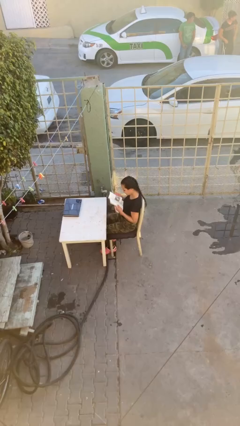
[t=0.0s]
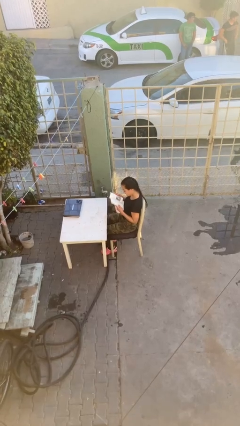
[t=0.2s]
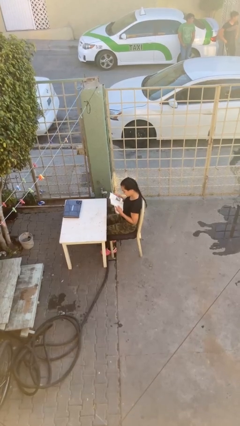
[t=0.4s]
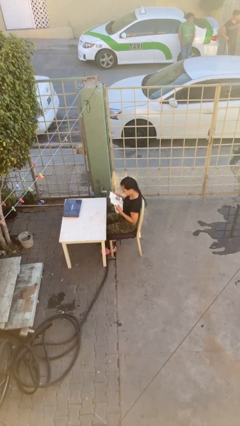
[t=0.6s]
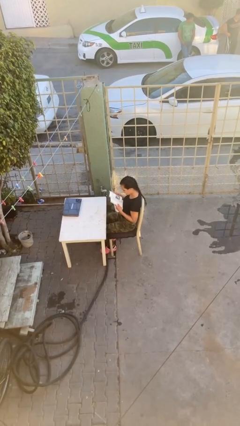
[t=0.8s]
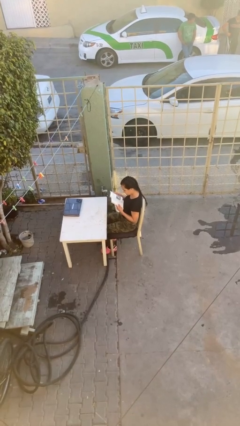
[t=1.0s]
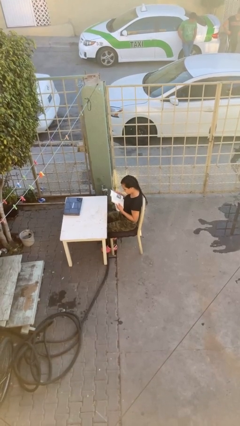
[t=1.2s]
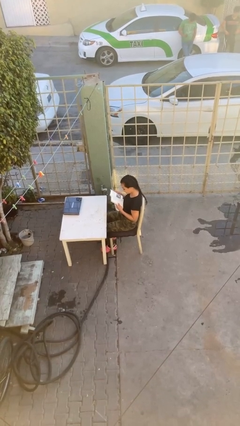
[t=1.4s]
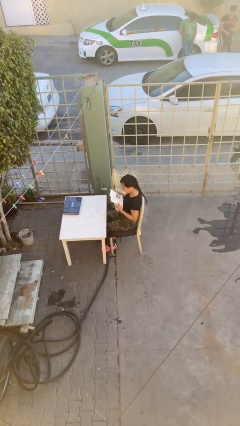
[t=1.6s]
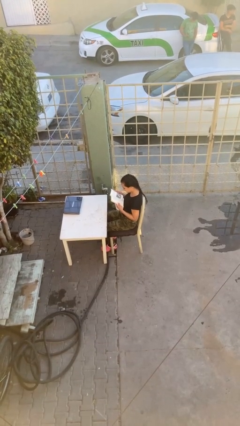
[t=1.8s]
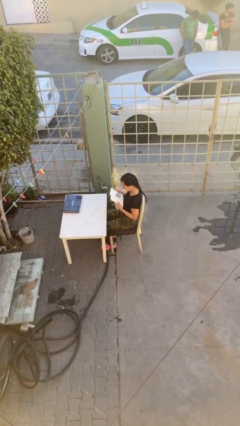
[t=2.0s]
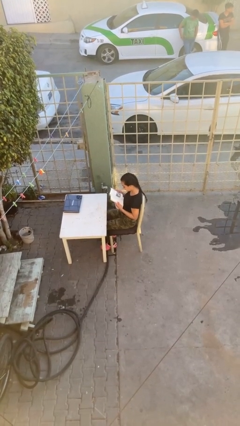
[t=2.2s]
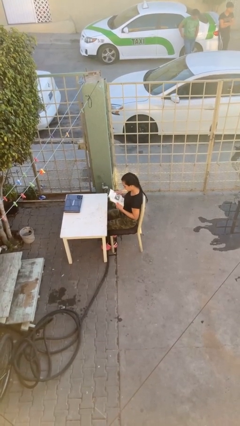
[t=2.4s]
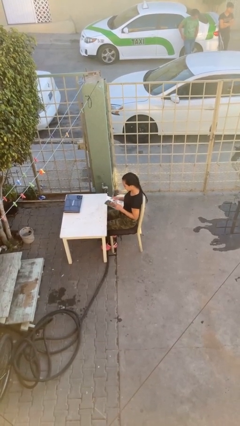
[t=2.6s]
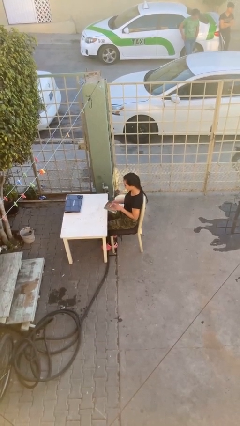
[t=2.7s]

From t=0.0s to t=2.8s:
person reads document

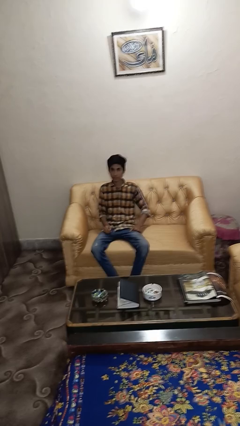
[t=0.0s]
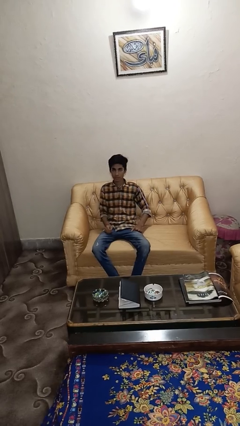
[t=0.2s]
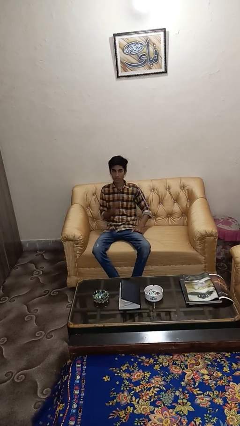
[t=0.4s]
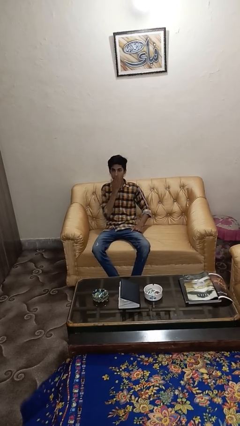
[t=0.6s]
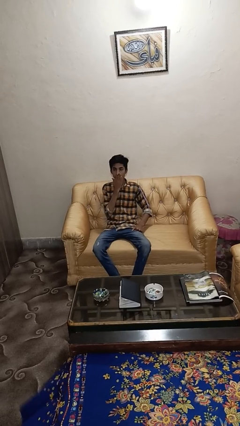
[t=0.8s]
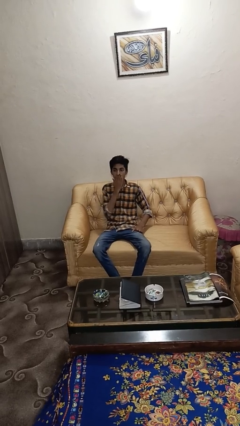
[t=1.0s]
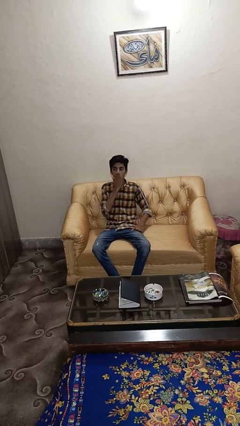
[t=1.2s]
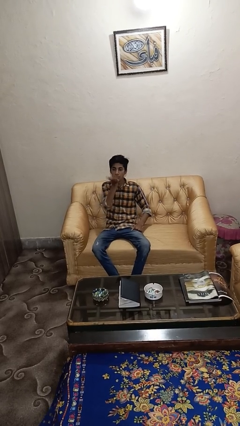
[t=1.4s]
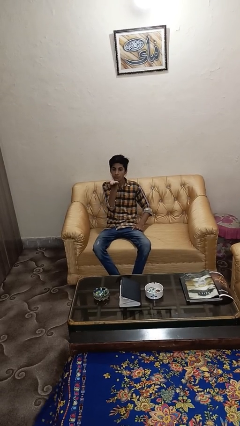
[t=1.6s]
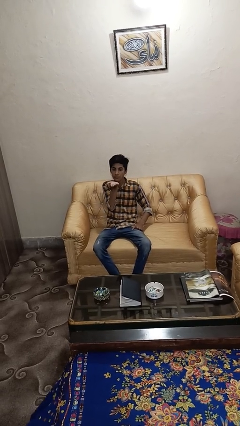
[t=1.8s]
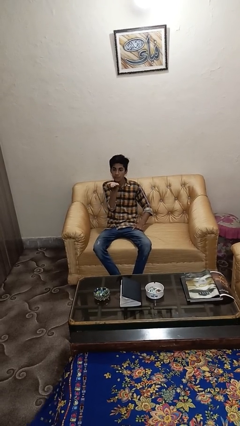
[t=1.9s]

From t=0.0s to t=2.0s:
person gestures blow kiss

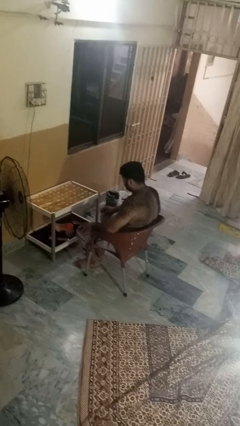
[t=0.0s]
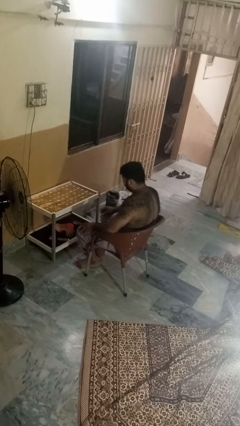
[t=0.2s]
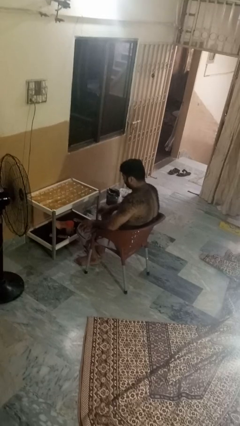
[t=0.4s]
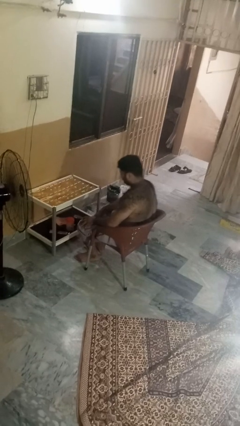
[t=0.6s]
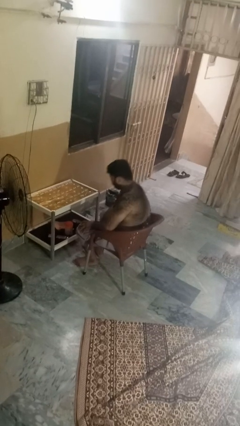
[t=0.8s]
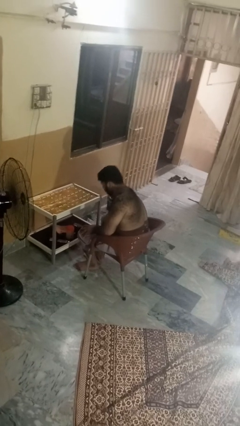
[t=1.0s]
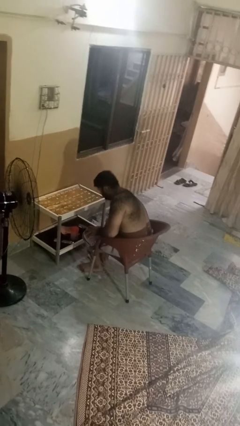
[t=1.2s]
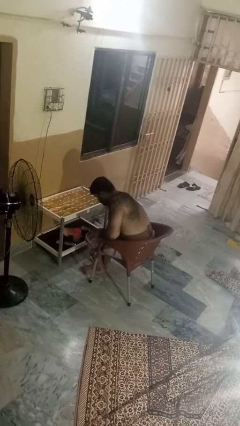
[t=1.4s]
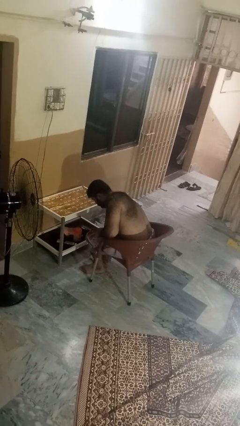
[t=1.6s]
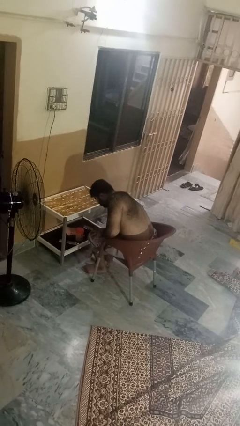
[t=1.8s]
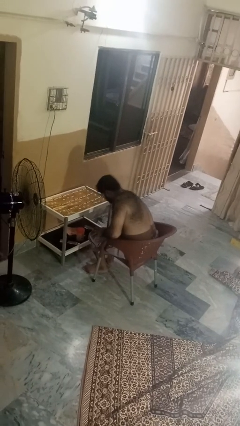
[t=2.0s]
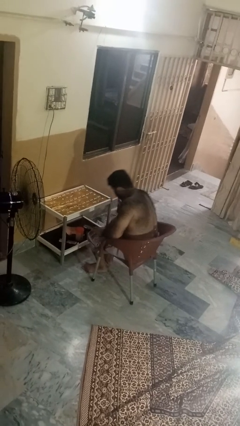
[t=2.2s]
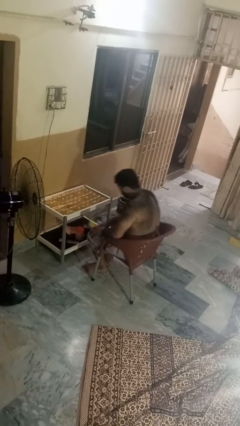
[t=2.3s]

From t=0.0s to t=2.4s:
person picks up object from floor

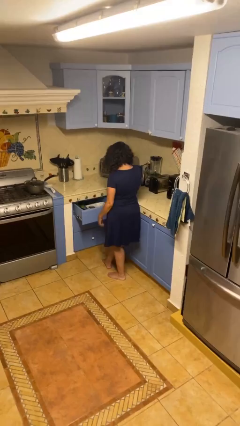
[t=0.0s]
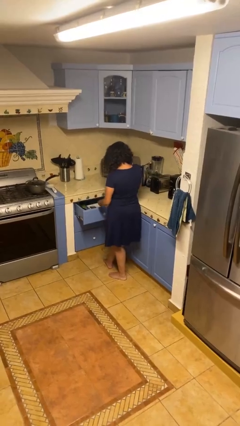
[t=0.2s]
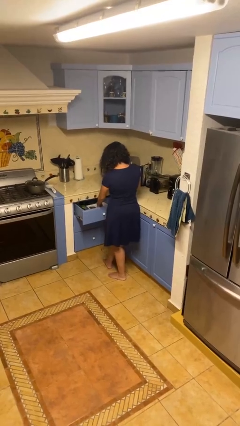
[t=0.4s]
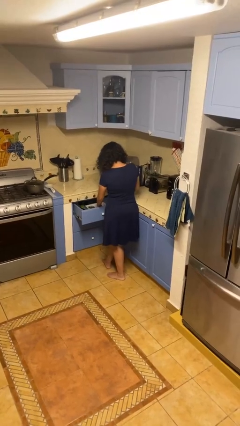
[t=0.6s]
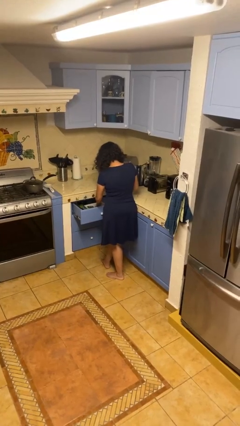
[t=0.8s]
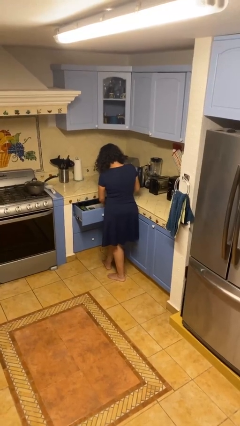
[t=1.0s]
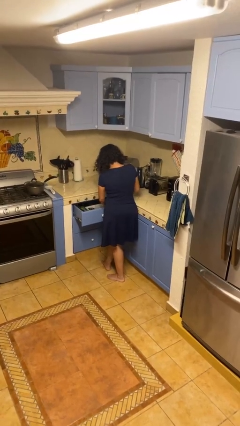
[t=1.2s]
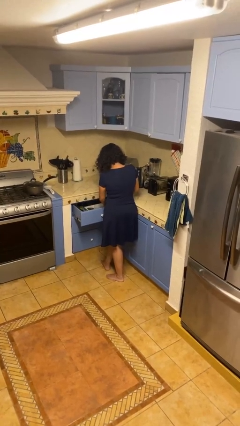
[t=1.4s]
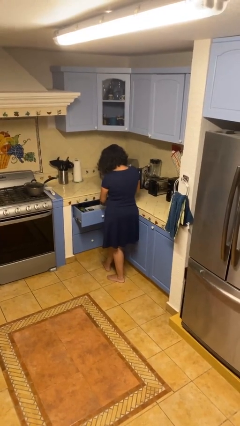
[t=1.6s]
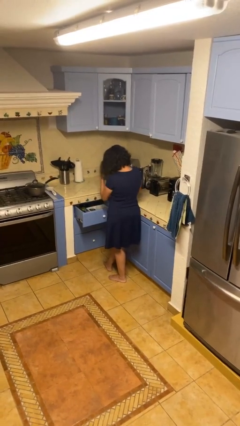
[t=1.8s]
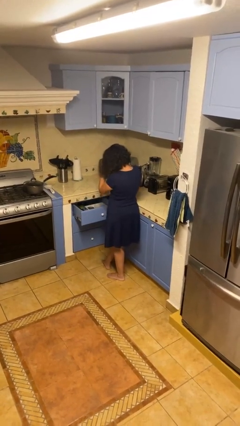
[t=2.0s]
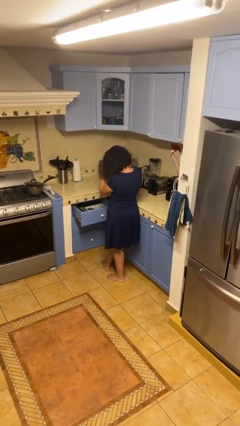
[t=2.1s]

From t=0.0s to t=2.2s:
person searches in kitchen drawer

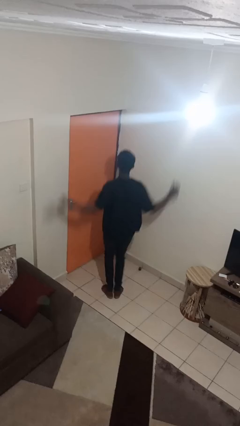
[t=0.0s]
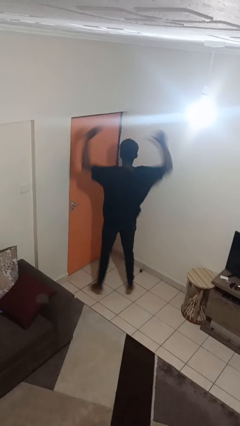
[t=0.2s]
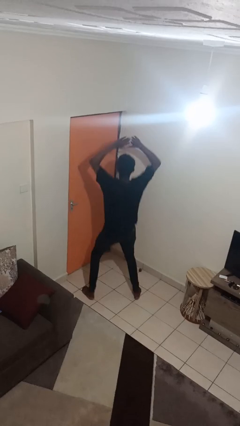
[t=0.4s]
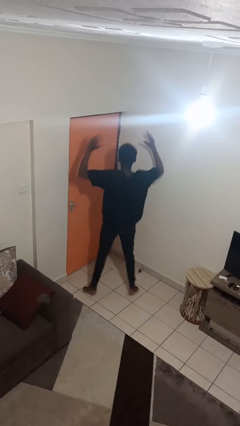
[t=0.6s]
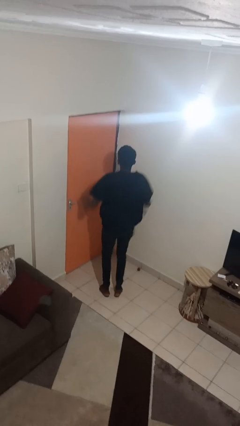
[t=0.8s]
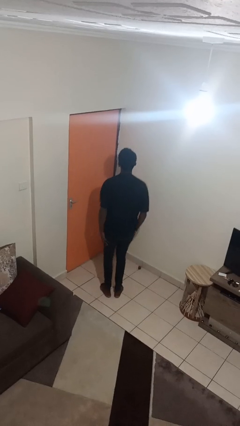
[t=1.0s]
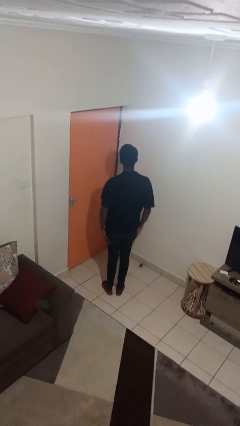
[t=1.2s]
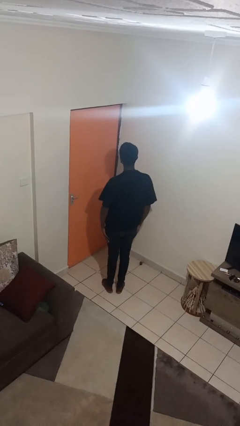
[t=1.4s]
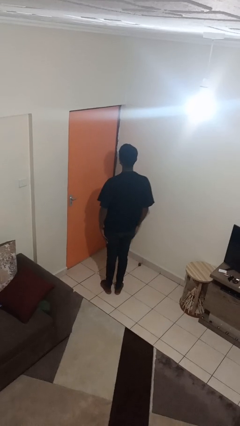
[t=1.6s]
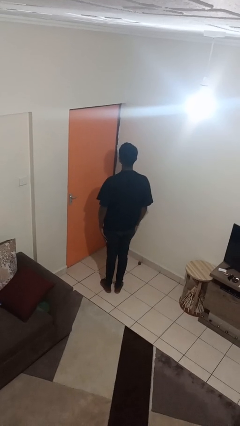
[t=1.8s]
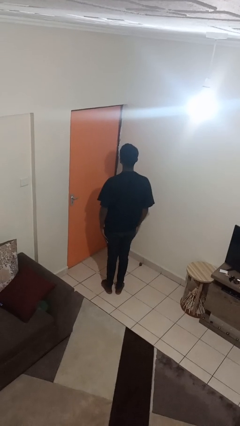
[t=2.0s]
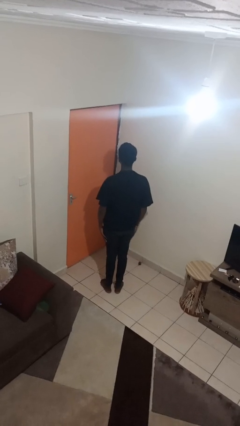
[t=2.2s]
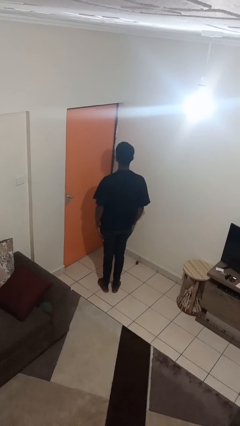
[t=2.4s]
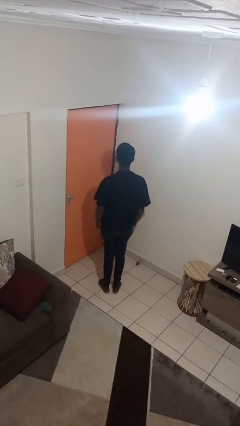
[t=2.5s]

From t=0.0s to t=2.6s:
person exercises with jumping jacks

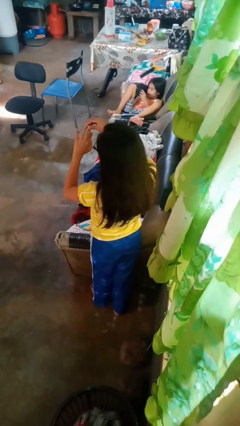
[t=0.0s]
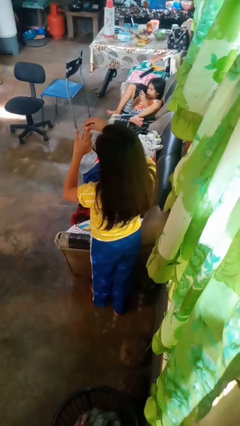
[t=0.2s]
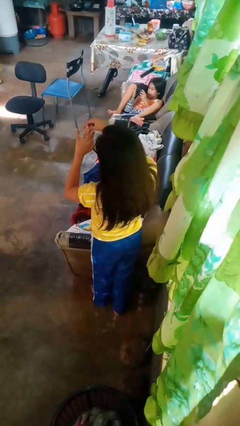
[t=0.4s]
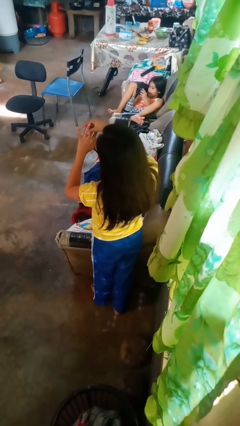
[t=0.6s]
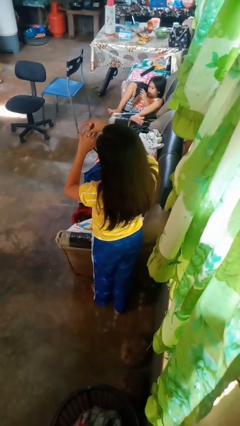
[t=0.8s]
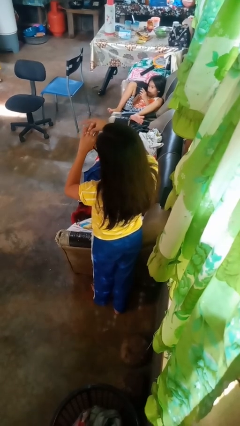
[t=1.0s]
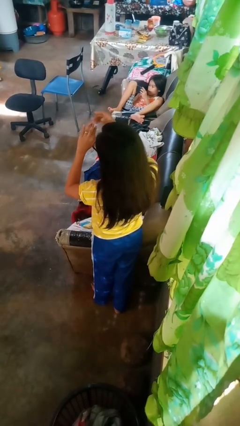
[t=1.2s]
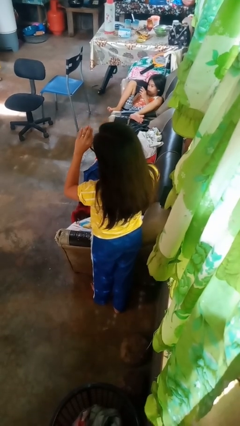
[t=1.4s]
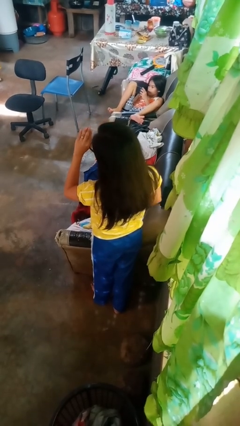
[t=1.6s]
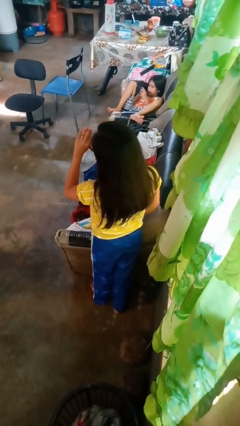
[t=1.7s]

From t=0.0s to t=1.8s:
person puts on ring

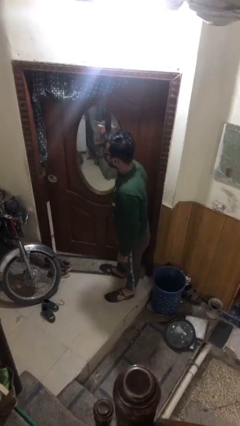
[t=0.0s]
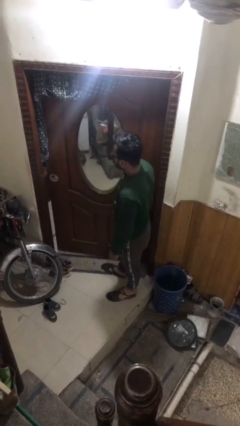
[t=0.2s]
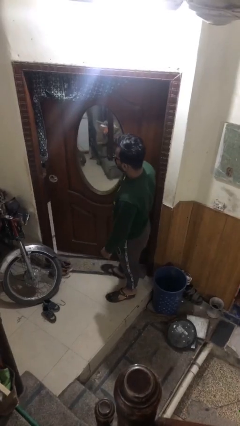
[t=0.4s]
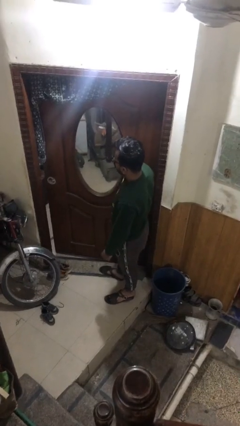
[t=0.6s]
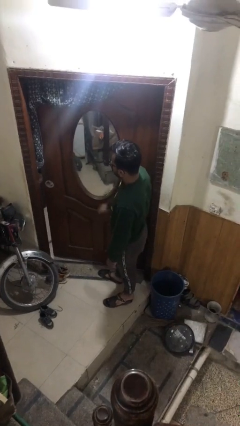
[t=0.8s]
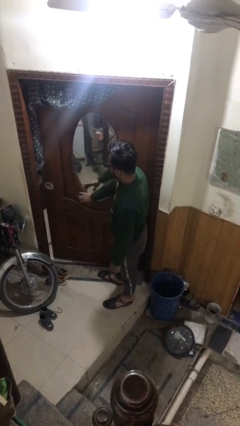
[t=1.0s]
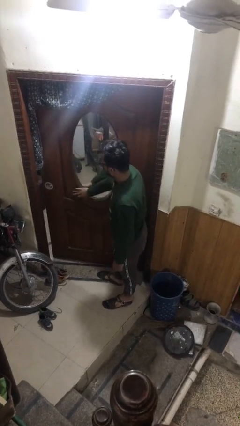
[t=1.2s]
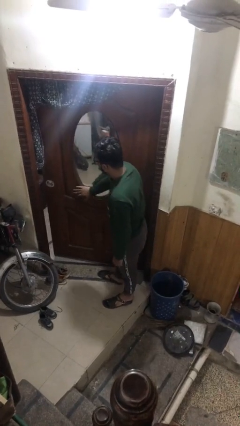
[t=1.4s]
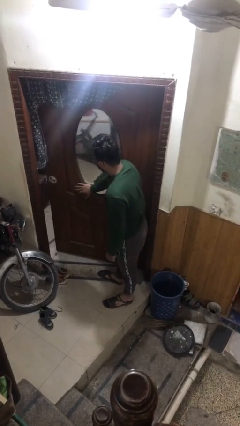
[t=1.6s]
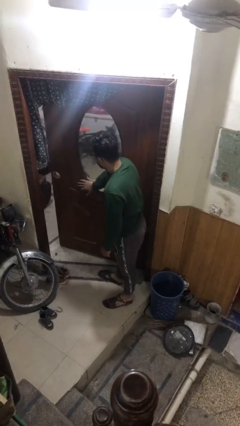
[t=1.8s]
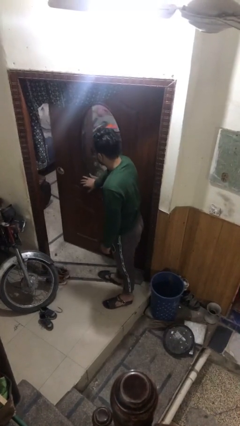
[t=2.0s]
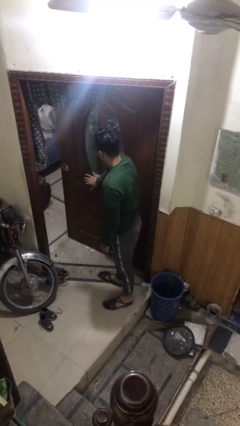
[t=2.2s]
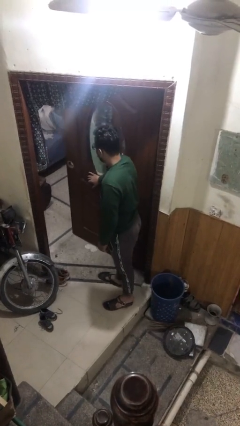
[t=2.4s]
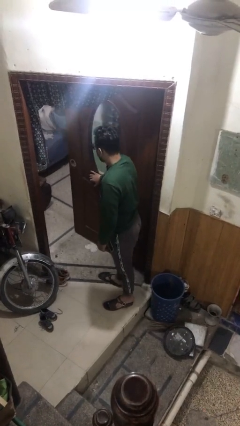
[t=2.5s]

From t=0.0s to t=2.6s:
person opens facility door

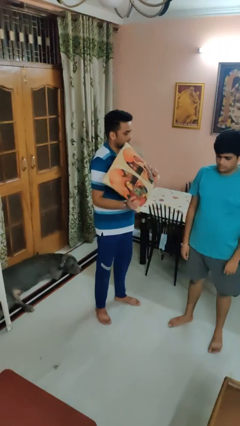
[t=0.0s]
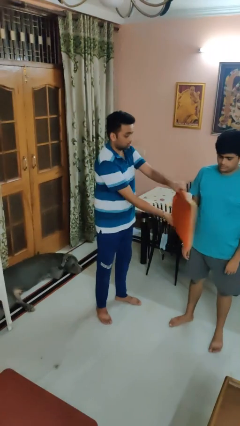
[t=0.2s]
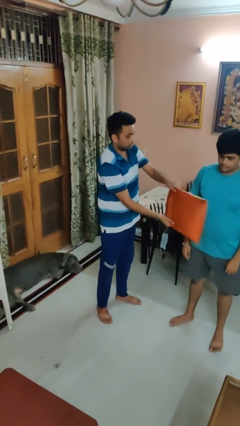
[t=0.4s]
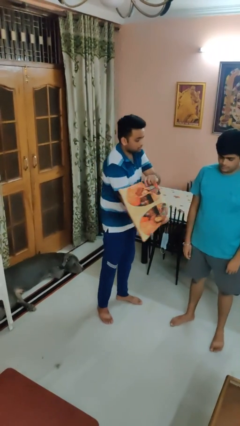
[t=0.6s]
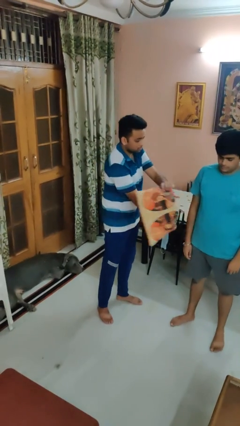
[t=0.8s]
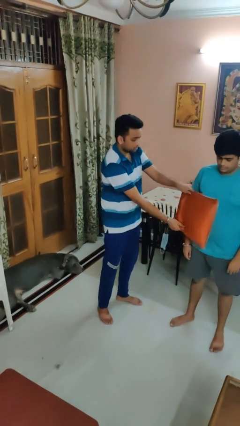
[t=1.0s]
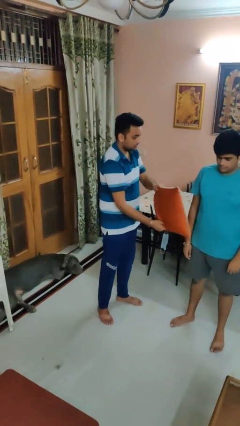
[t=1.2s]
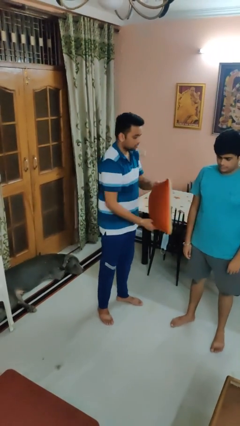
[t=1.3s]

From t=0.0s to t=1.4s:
person hits person with pillow
